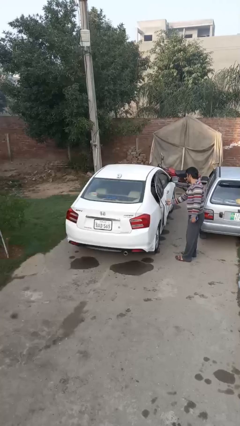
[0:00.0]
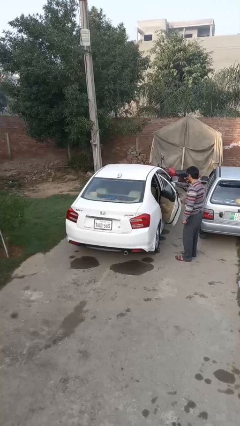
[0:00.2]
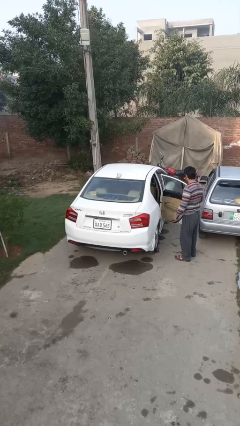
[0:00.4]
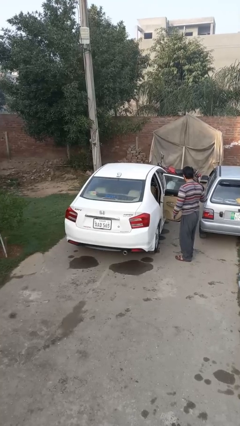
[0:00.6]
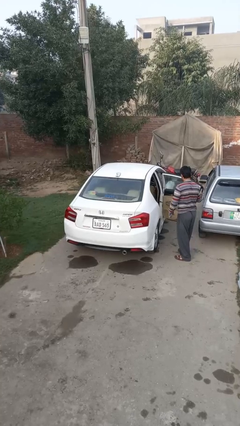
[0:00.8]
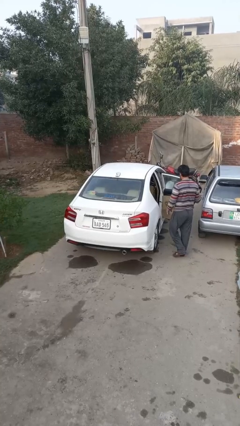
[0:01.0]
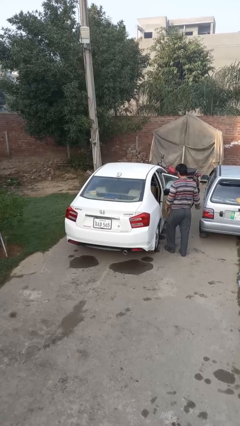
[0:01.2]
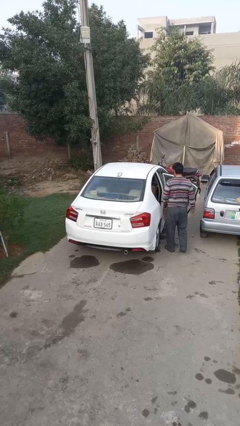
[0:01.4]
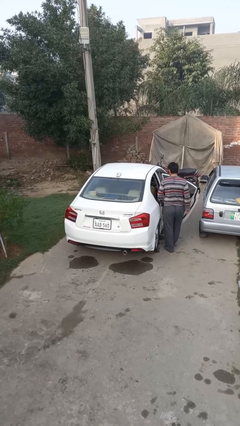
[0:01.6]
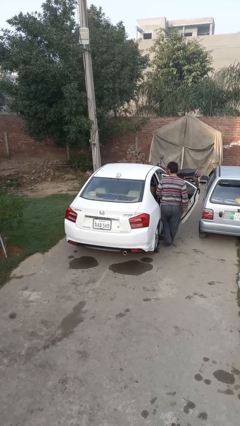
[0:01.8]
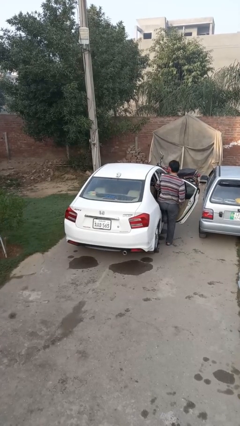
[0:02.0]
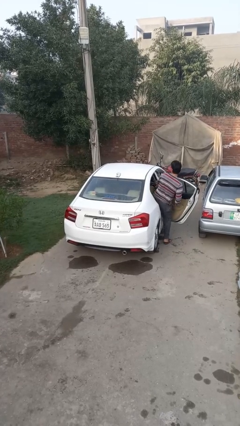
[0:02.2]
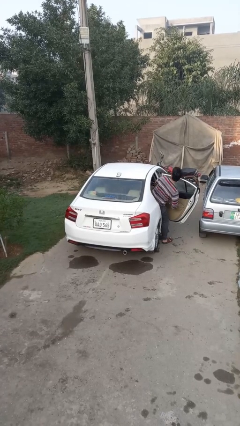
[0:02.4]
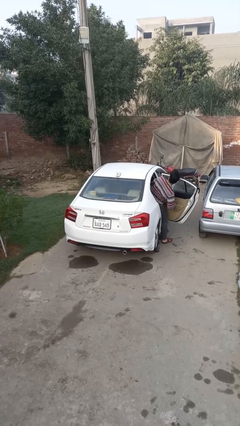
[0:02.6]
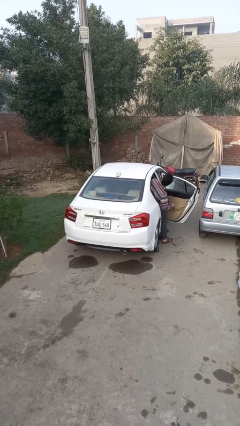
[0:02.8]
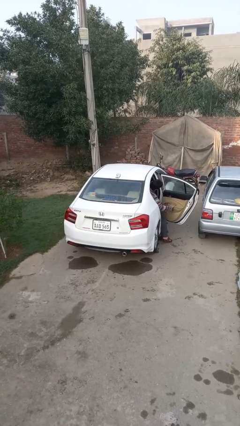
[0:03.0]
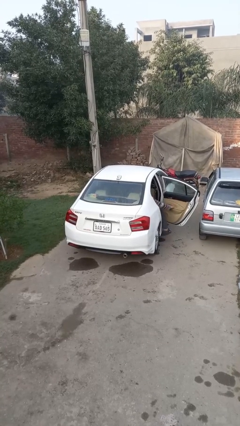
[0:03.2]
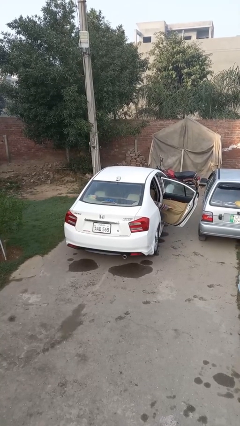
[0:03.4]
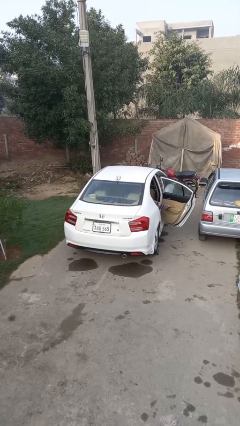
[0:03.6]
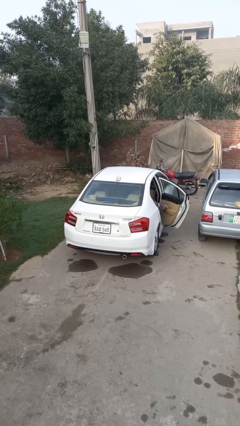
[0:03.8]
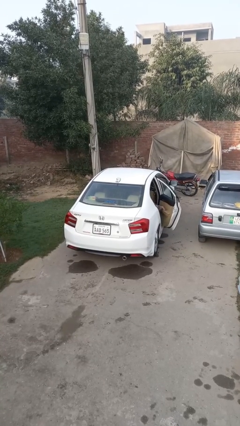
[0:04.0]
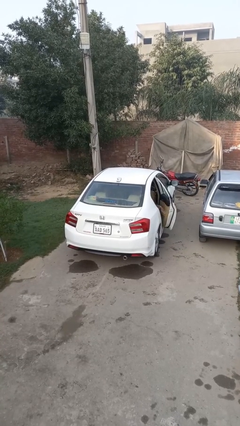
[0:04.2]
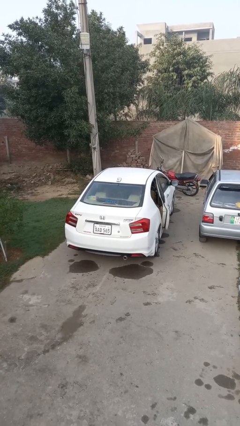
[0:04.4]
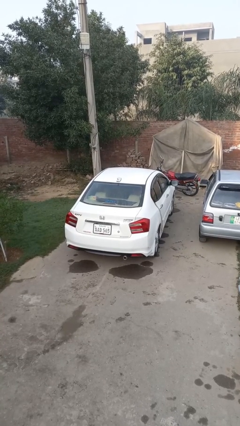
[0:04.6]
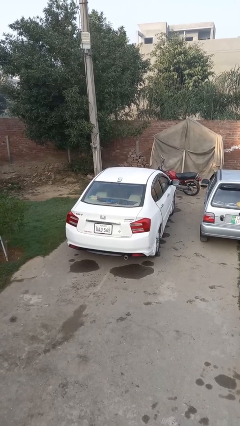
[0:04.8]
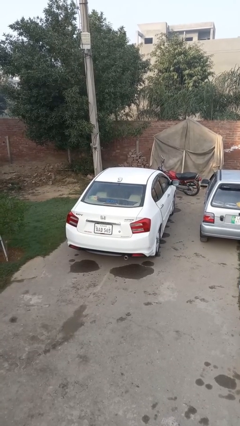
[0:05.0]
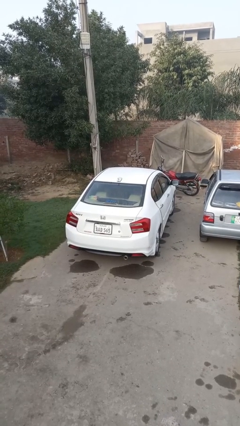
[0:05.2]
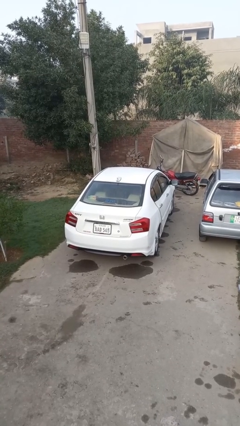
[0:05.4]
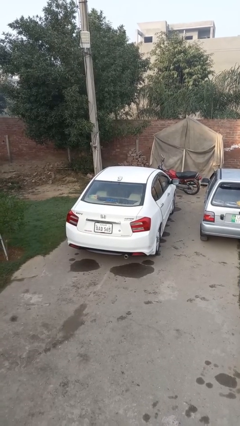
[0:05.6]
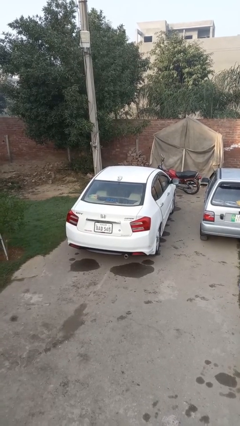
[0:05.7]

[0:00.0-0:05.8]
car picks up person

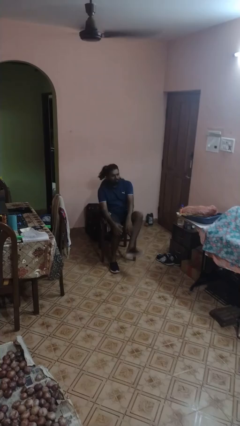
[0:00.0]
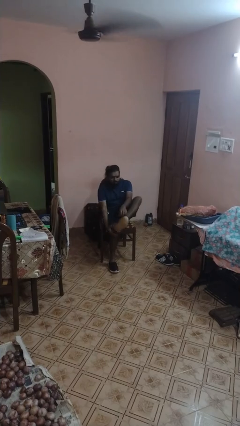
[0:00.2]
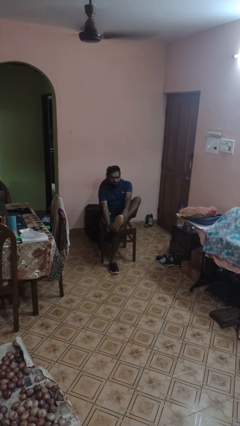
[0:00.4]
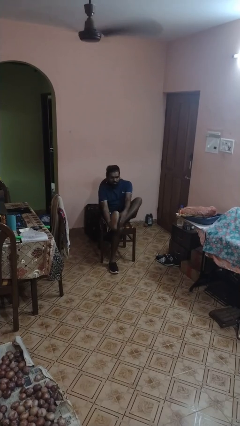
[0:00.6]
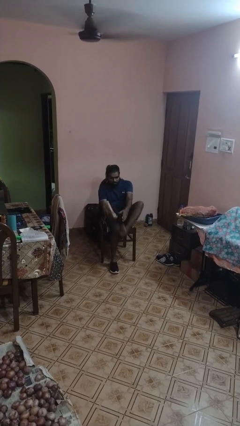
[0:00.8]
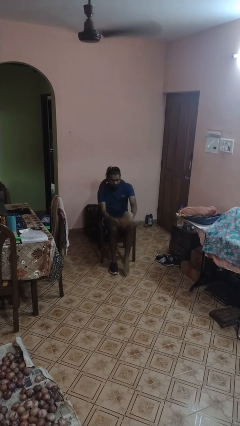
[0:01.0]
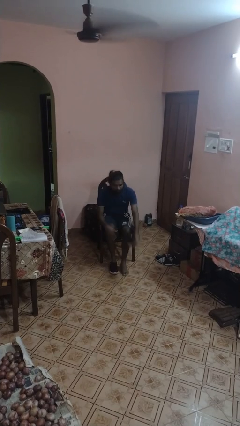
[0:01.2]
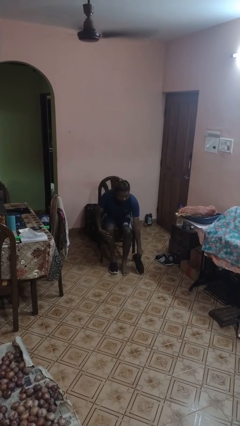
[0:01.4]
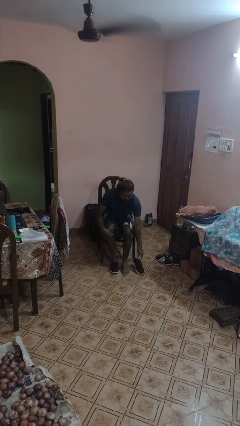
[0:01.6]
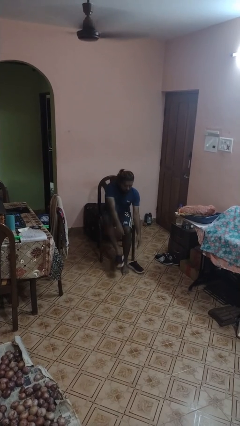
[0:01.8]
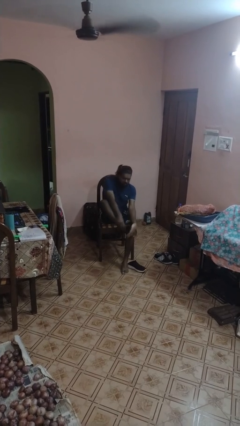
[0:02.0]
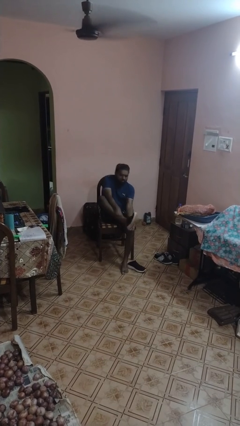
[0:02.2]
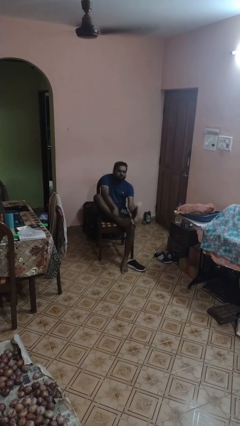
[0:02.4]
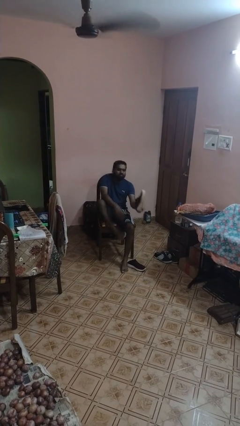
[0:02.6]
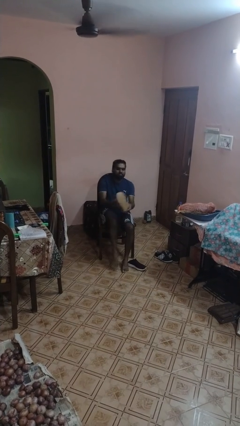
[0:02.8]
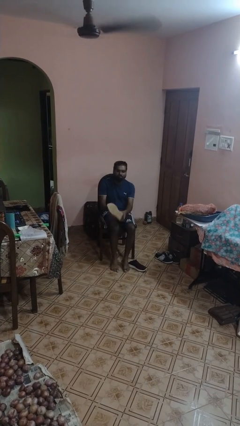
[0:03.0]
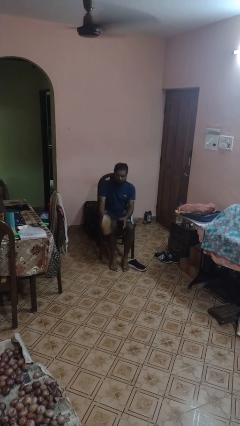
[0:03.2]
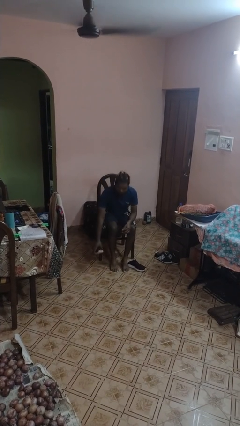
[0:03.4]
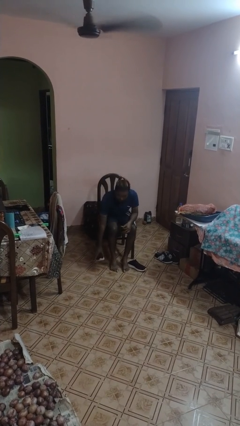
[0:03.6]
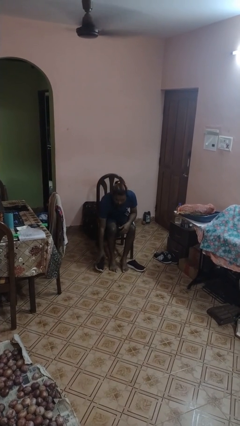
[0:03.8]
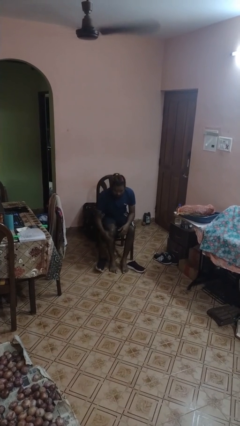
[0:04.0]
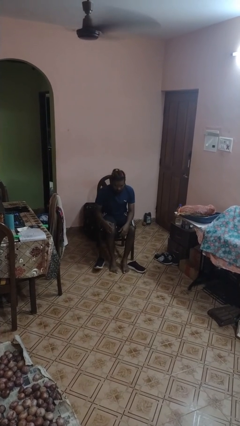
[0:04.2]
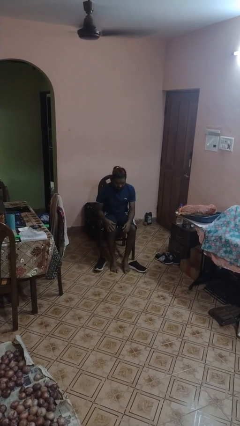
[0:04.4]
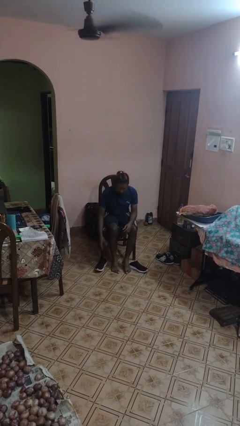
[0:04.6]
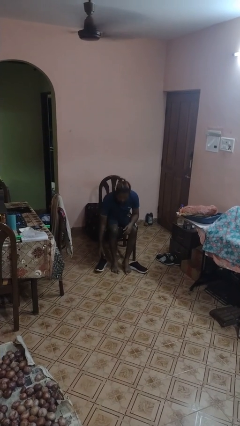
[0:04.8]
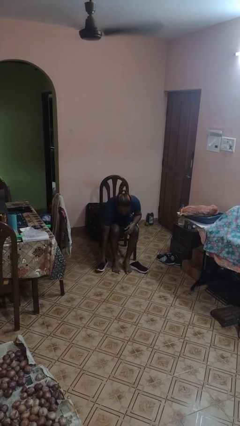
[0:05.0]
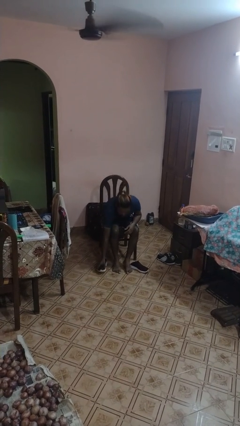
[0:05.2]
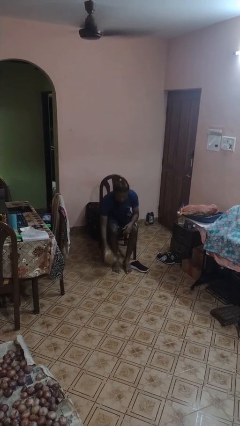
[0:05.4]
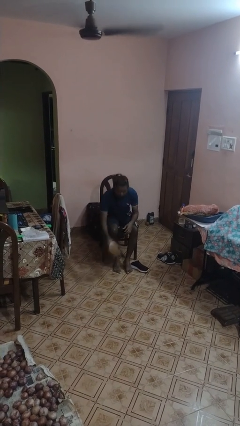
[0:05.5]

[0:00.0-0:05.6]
person takes off shoes

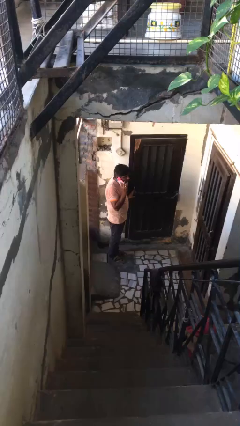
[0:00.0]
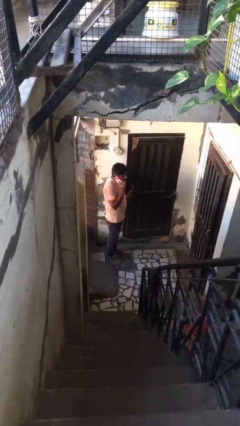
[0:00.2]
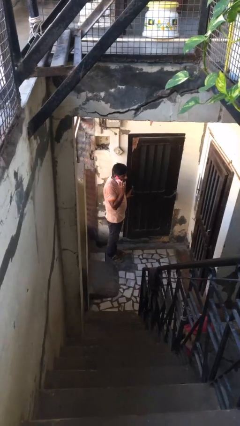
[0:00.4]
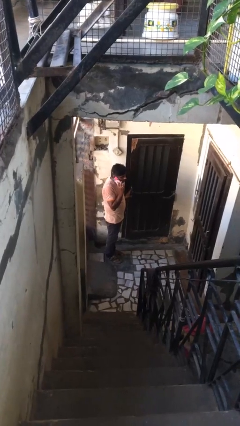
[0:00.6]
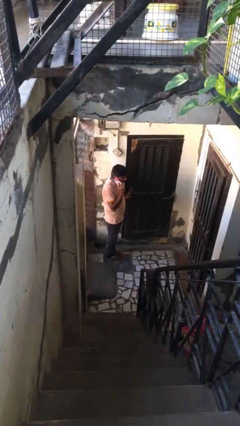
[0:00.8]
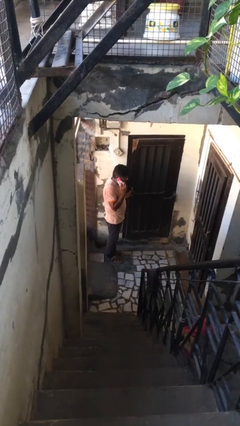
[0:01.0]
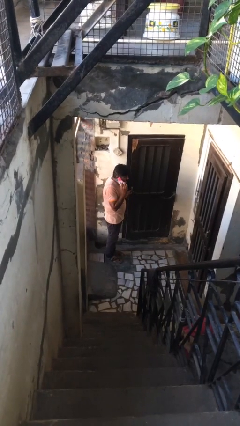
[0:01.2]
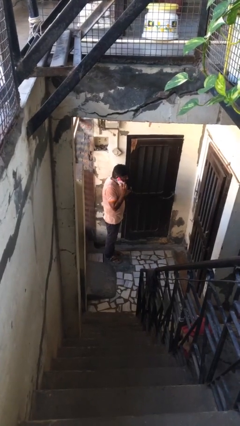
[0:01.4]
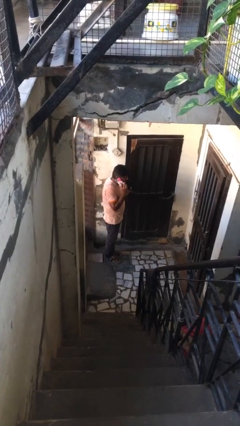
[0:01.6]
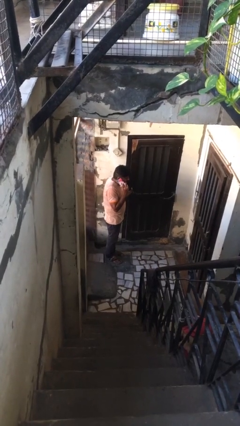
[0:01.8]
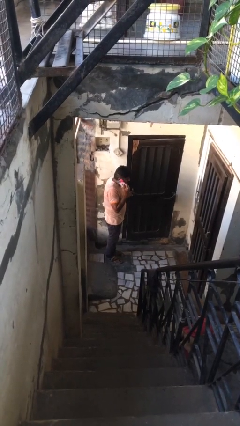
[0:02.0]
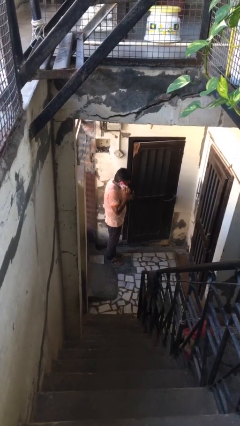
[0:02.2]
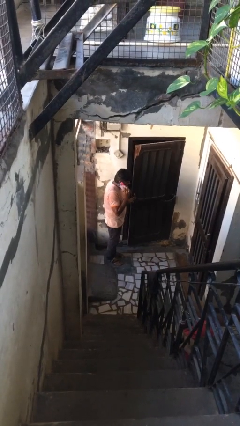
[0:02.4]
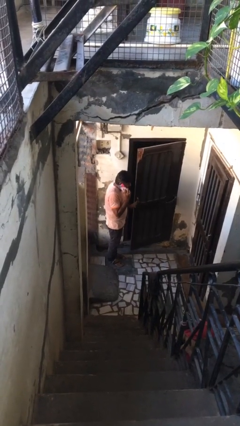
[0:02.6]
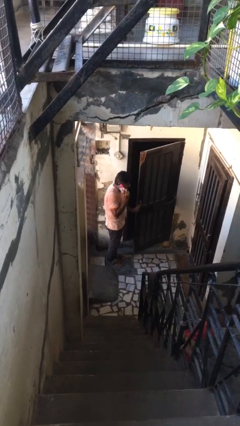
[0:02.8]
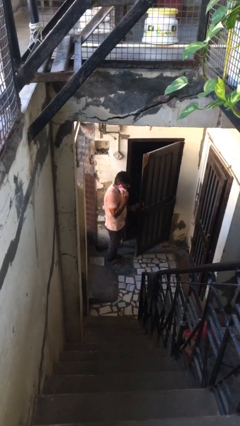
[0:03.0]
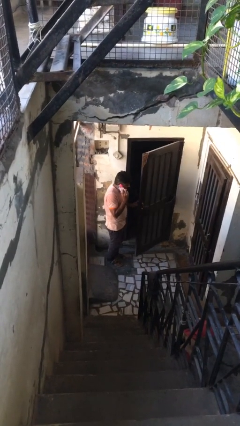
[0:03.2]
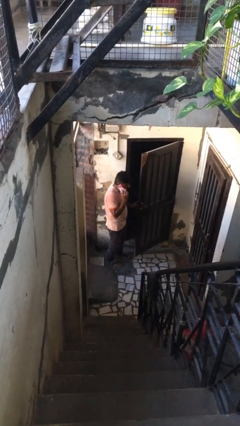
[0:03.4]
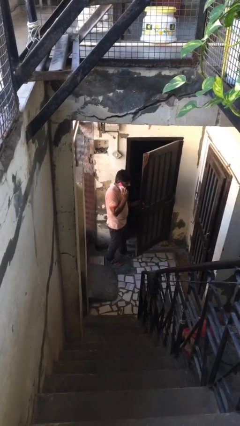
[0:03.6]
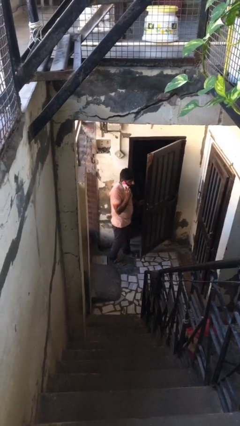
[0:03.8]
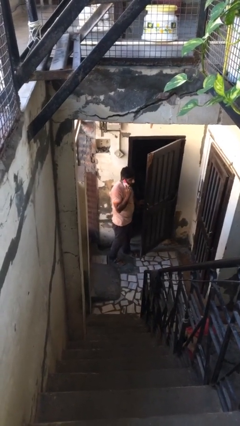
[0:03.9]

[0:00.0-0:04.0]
person opens facility door

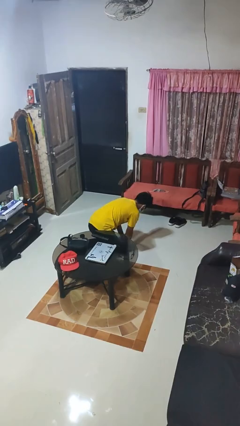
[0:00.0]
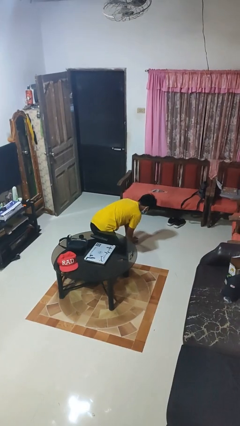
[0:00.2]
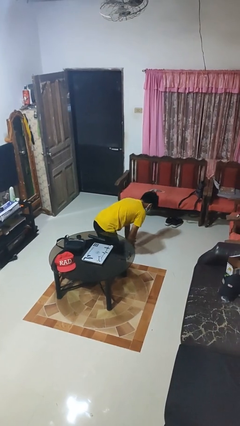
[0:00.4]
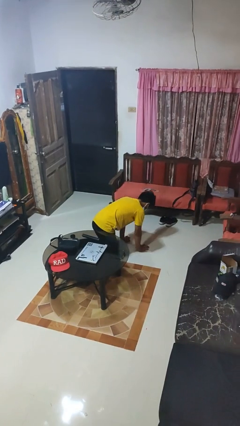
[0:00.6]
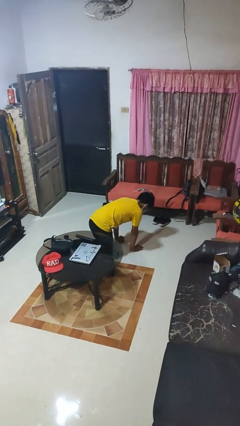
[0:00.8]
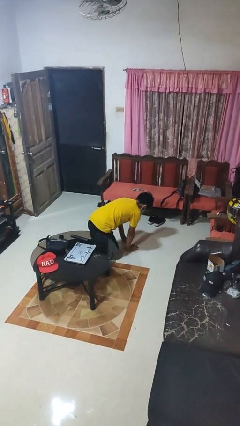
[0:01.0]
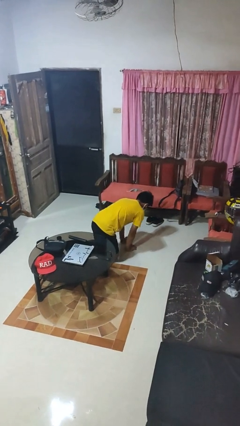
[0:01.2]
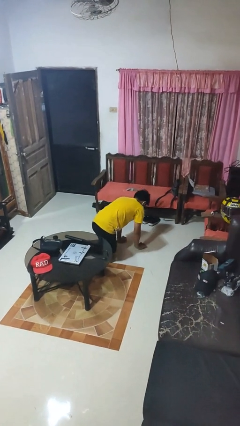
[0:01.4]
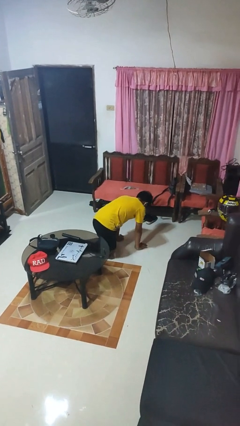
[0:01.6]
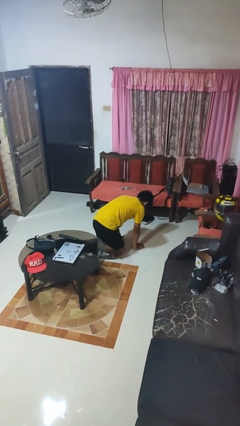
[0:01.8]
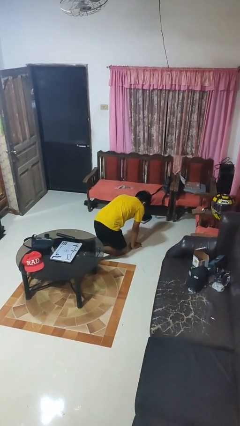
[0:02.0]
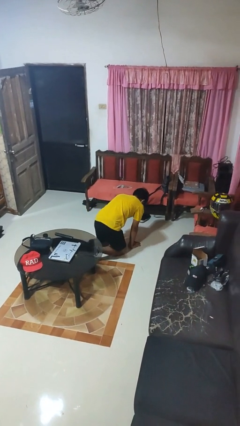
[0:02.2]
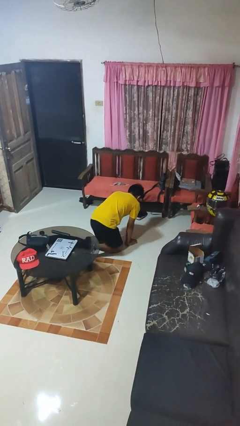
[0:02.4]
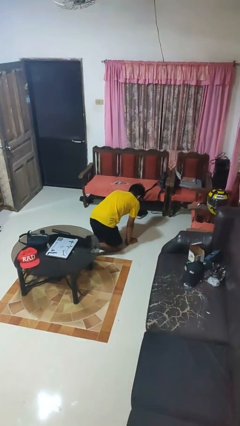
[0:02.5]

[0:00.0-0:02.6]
person crawls
